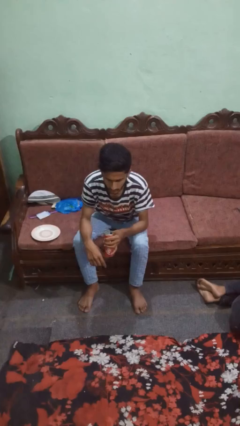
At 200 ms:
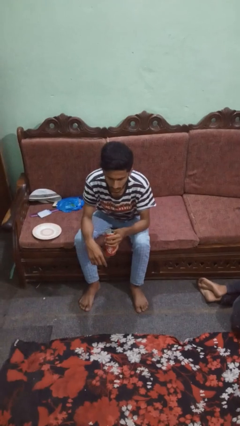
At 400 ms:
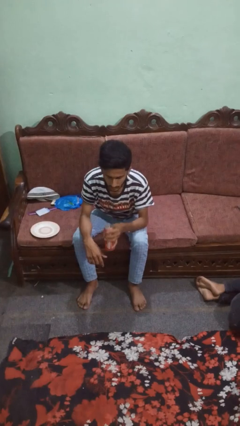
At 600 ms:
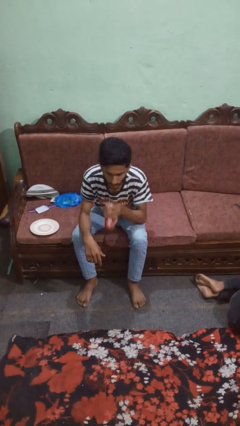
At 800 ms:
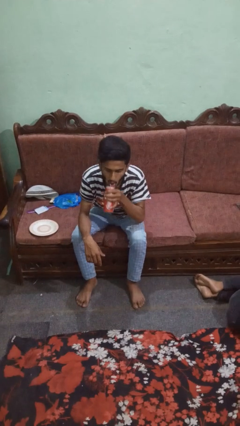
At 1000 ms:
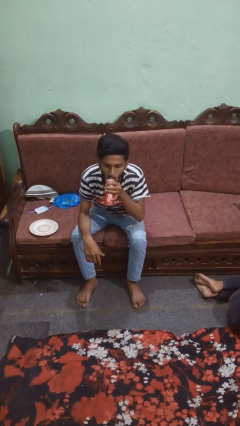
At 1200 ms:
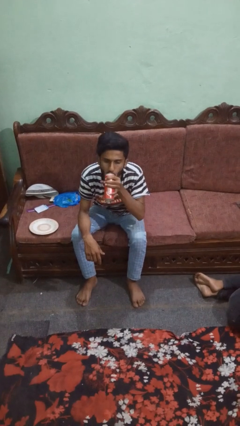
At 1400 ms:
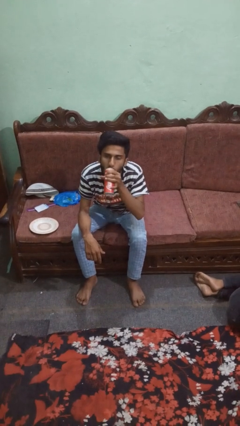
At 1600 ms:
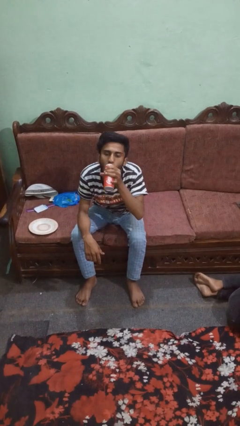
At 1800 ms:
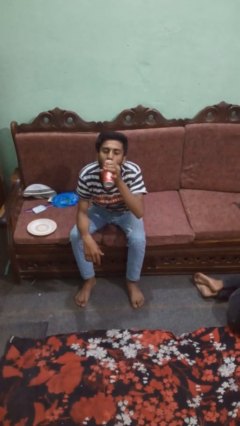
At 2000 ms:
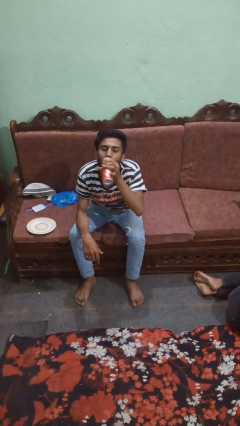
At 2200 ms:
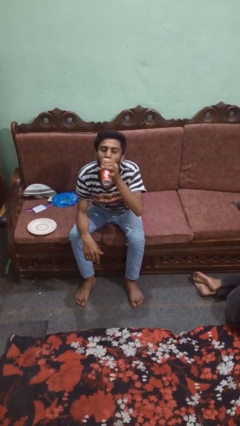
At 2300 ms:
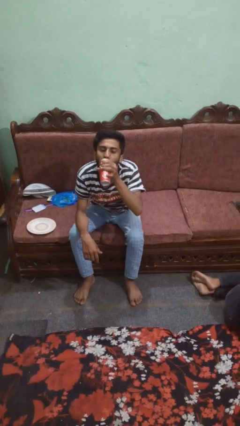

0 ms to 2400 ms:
person drinks from beverage can

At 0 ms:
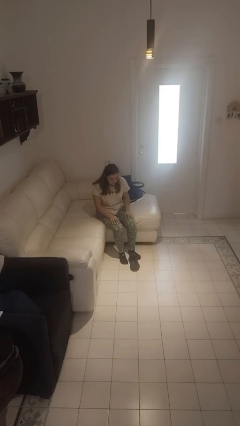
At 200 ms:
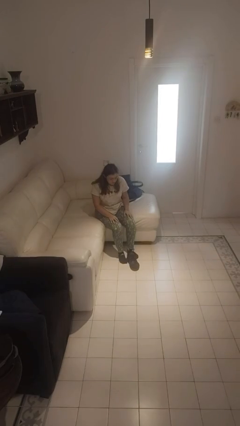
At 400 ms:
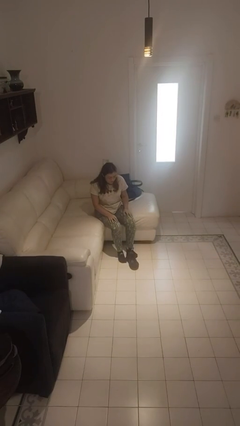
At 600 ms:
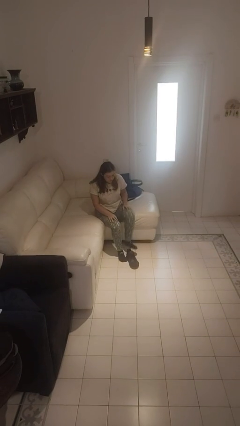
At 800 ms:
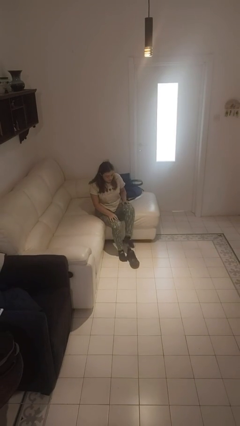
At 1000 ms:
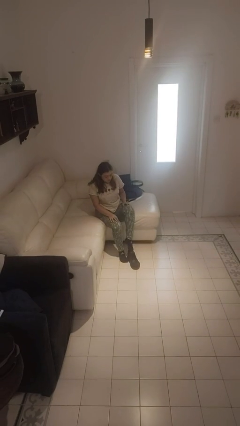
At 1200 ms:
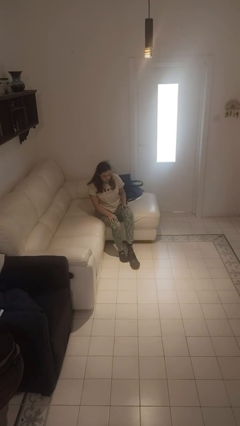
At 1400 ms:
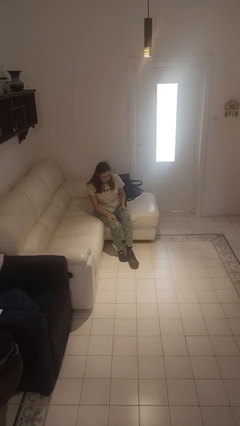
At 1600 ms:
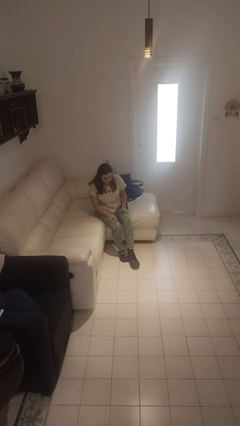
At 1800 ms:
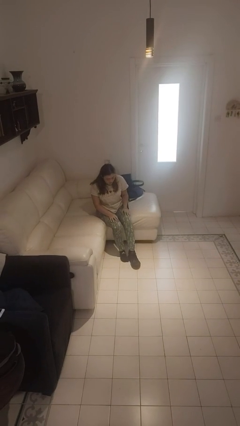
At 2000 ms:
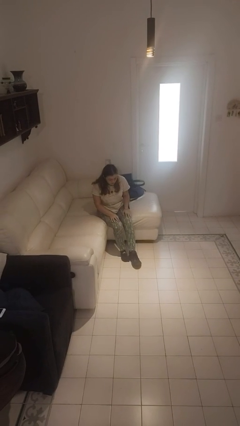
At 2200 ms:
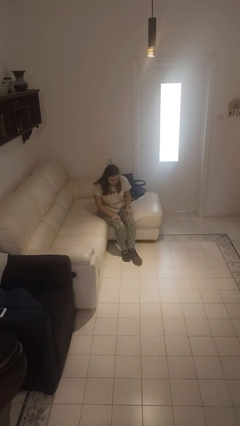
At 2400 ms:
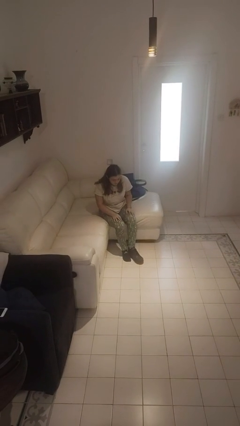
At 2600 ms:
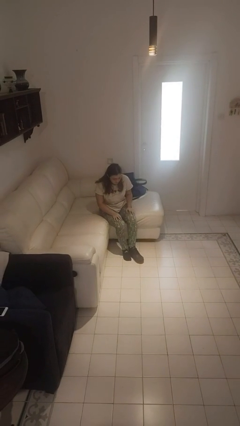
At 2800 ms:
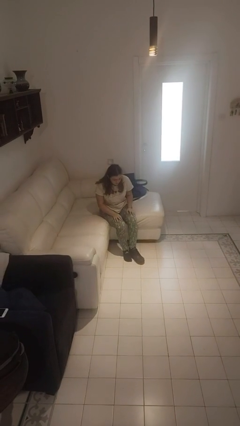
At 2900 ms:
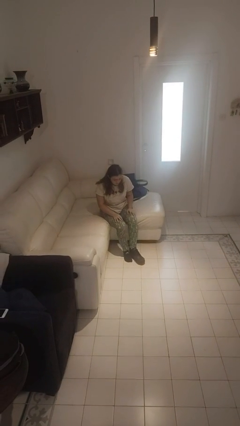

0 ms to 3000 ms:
person puts on shoes

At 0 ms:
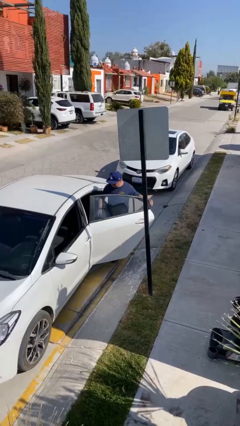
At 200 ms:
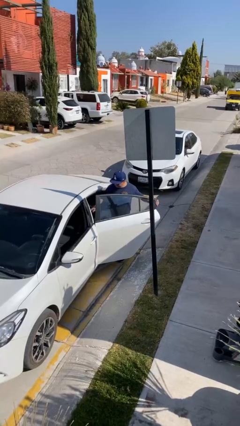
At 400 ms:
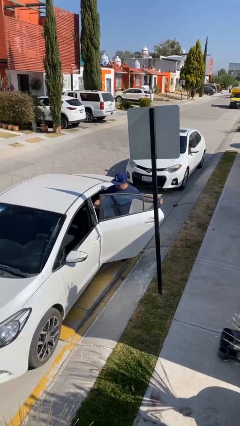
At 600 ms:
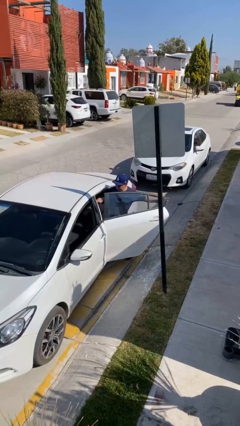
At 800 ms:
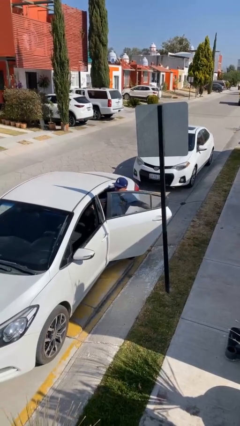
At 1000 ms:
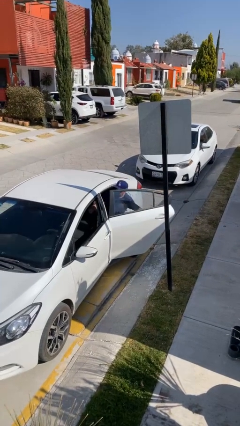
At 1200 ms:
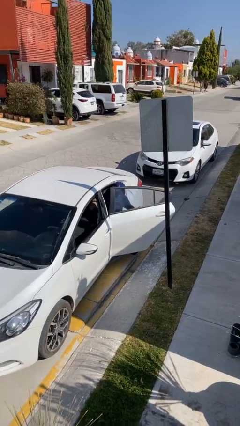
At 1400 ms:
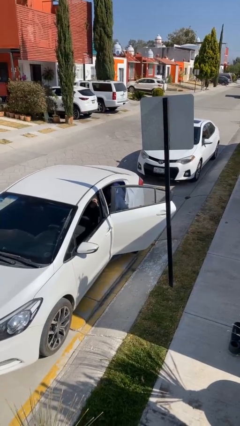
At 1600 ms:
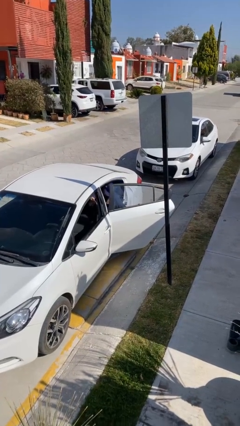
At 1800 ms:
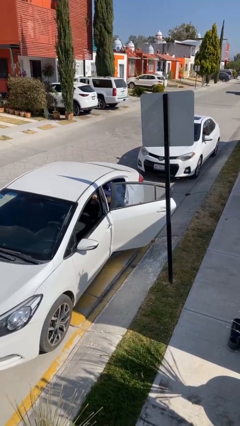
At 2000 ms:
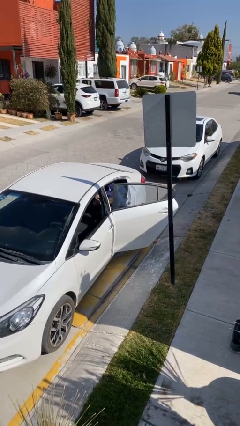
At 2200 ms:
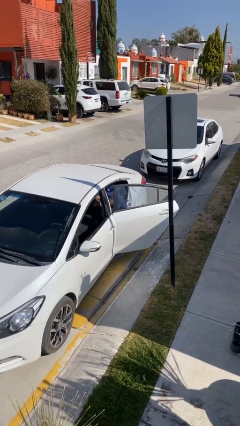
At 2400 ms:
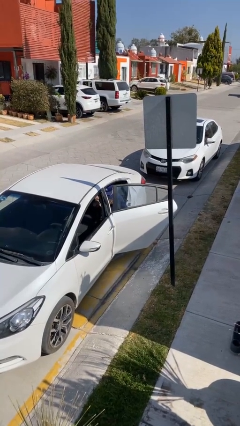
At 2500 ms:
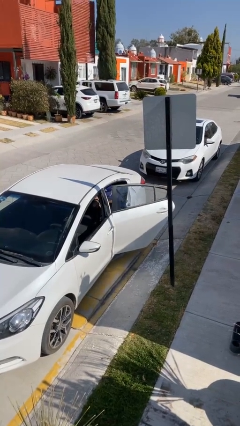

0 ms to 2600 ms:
person enters car

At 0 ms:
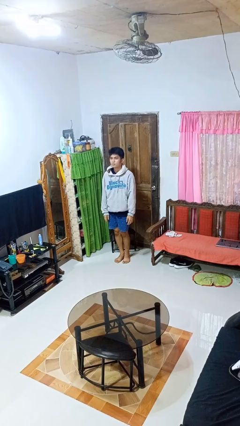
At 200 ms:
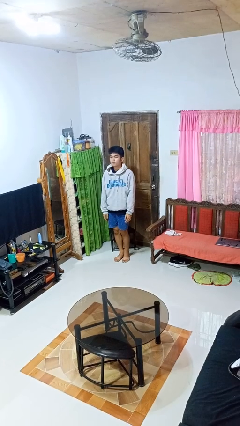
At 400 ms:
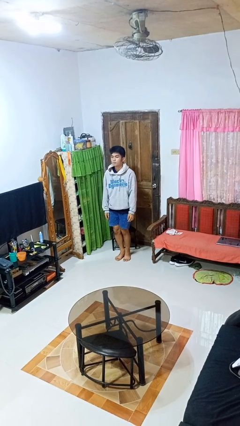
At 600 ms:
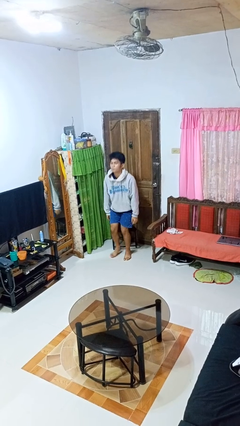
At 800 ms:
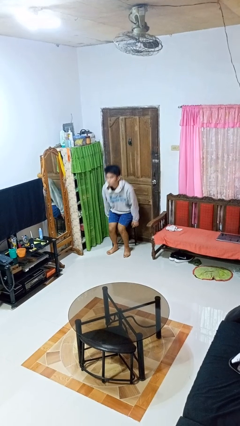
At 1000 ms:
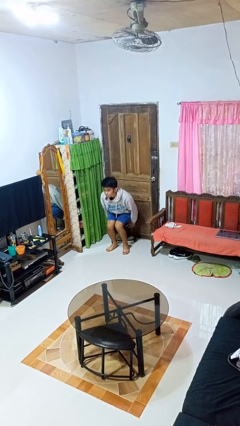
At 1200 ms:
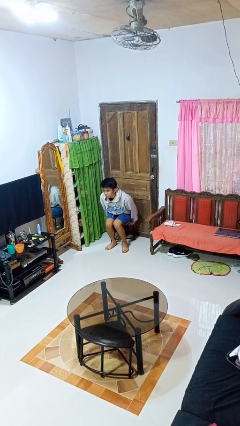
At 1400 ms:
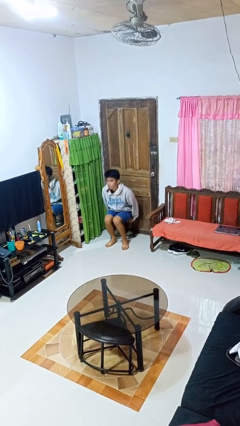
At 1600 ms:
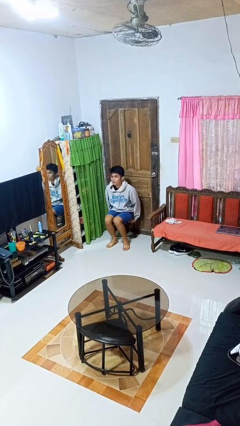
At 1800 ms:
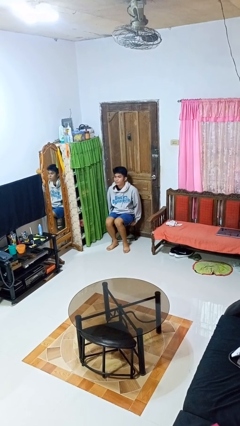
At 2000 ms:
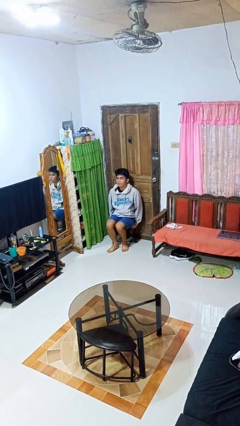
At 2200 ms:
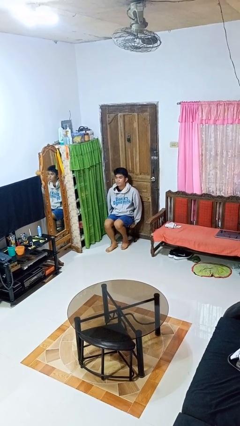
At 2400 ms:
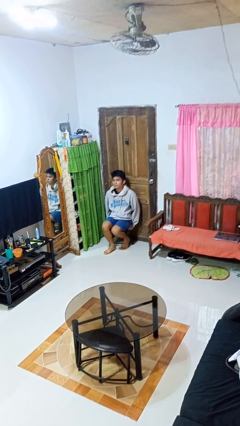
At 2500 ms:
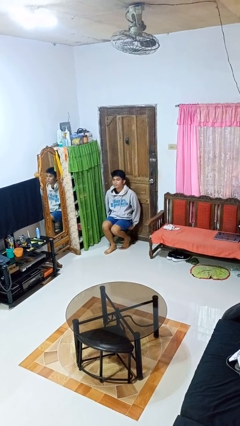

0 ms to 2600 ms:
person sits down

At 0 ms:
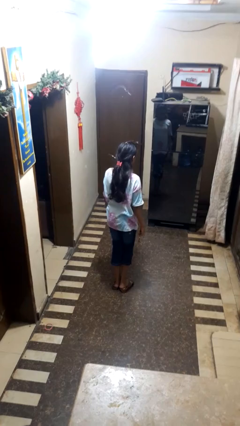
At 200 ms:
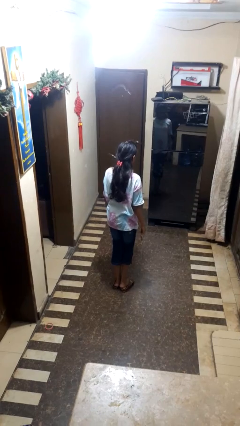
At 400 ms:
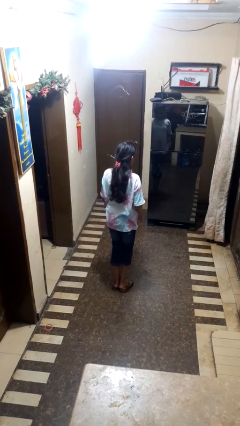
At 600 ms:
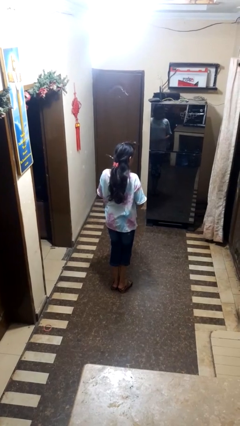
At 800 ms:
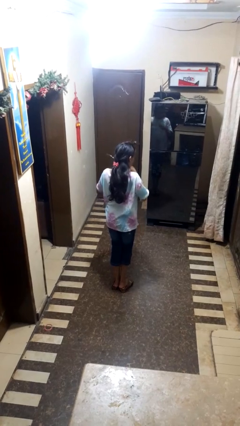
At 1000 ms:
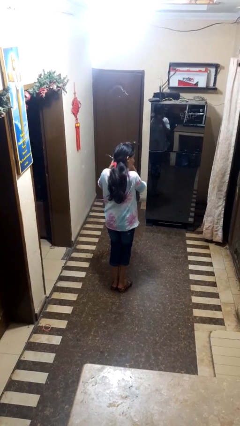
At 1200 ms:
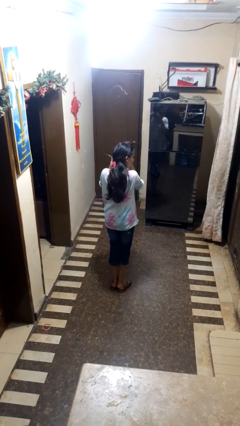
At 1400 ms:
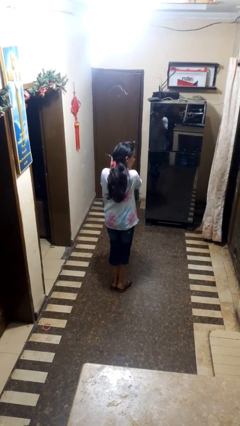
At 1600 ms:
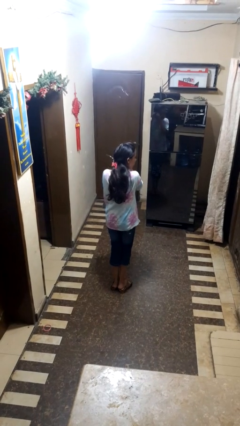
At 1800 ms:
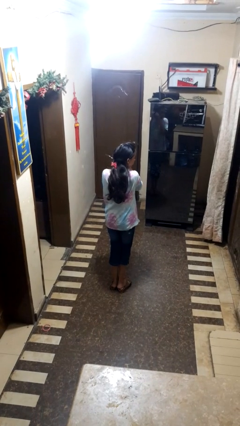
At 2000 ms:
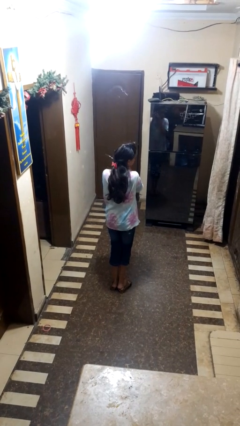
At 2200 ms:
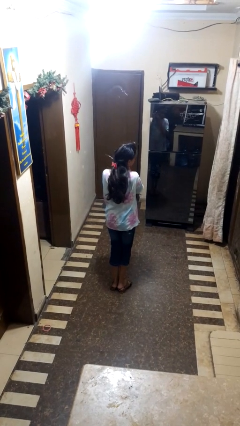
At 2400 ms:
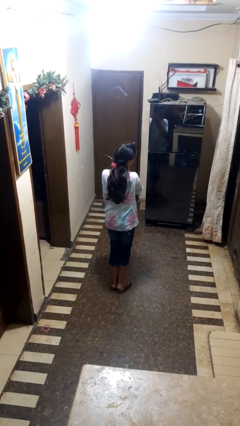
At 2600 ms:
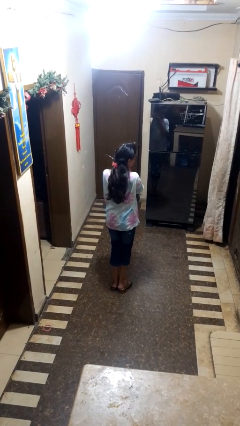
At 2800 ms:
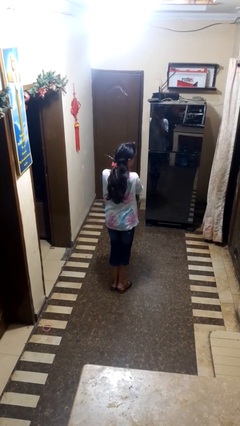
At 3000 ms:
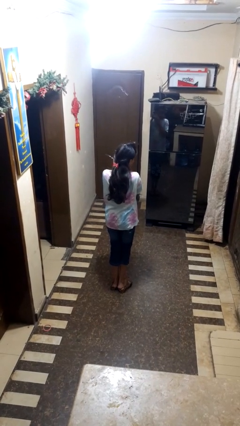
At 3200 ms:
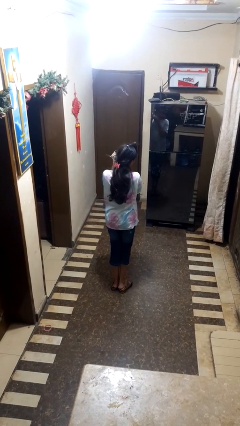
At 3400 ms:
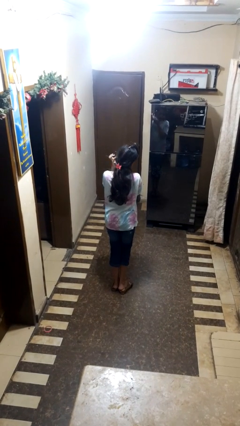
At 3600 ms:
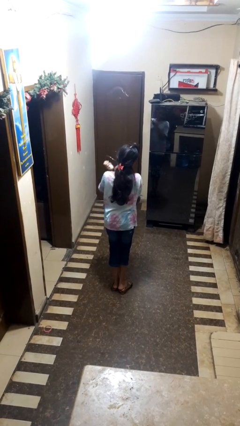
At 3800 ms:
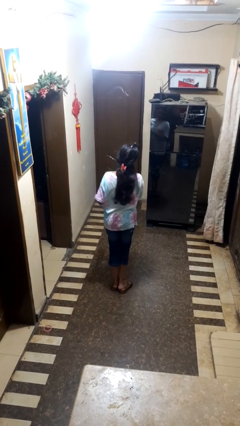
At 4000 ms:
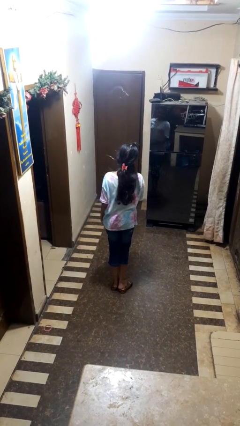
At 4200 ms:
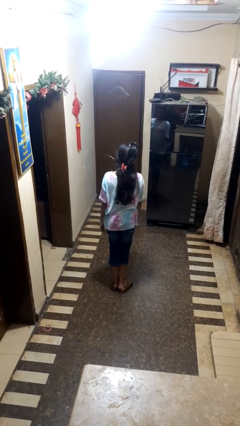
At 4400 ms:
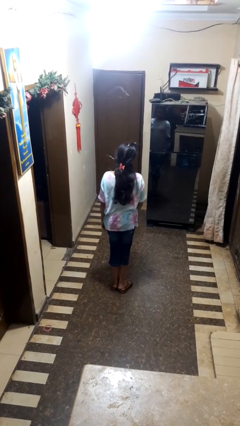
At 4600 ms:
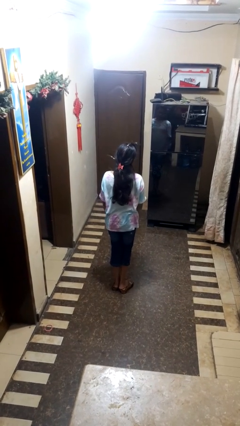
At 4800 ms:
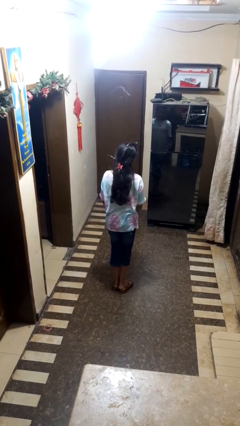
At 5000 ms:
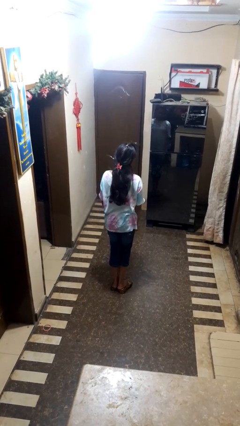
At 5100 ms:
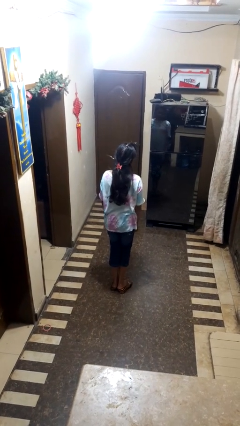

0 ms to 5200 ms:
person puts on earrings

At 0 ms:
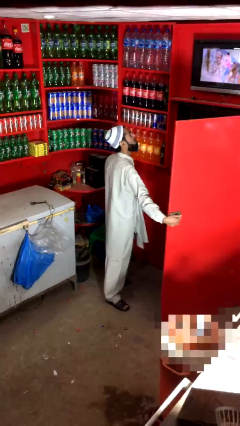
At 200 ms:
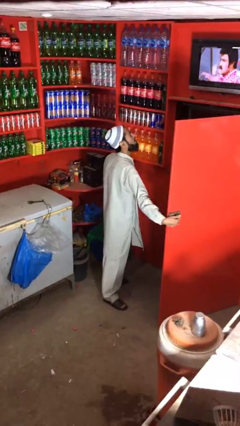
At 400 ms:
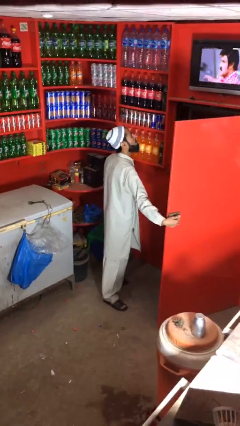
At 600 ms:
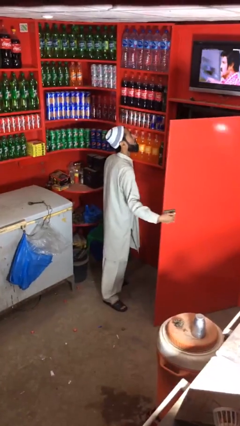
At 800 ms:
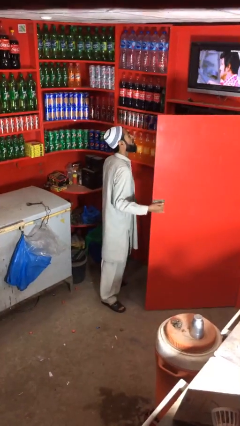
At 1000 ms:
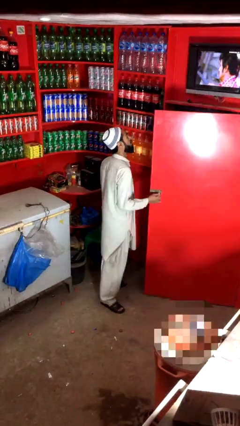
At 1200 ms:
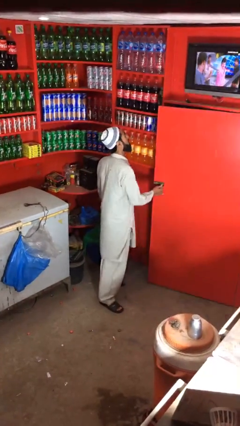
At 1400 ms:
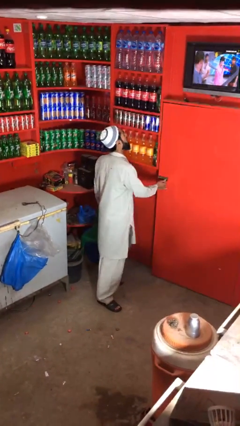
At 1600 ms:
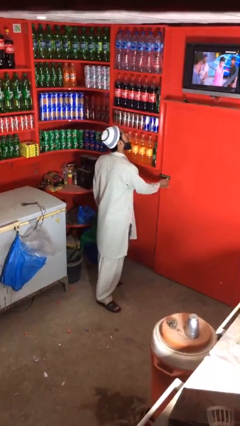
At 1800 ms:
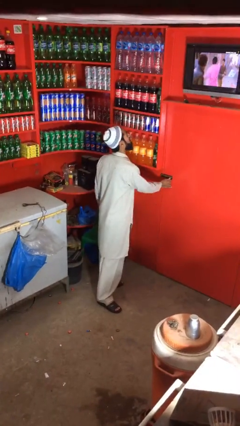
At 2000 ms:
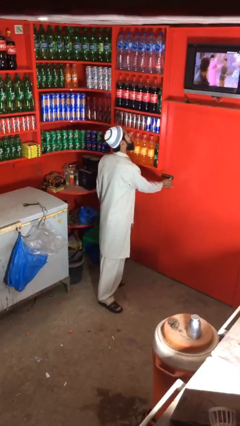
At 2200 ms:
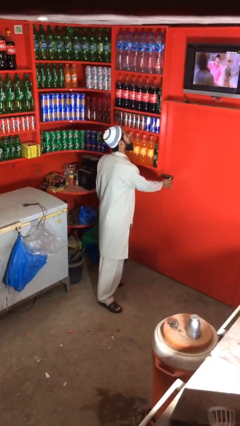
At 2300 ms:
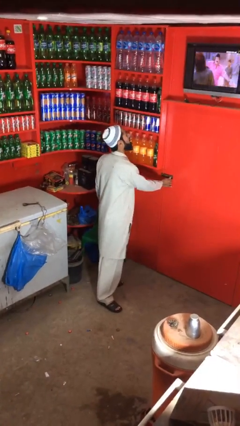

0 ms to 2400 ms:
person closes facility door
